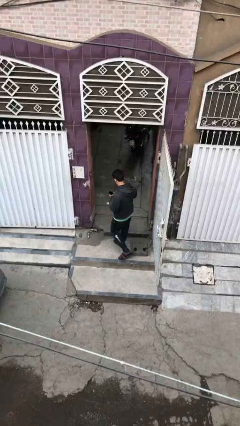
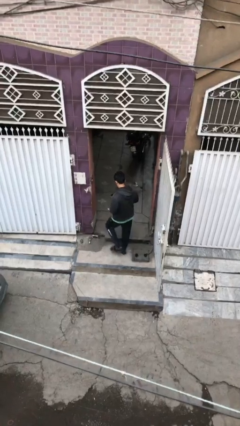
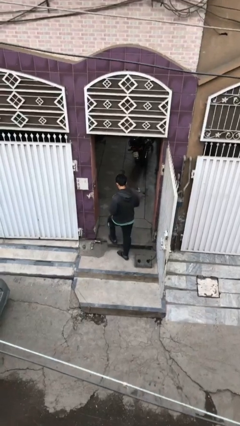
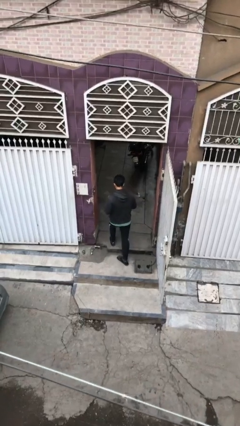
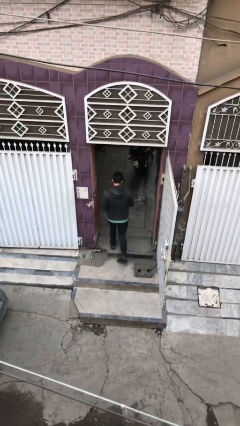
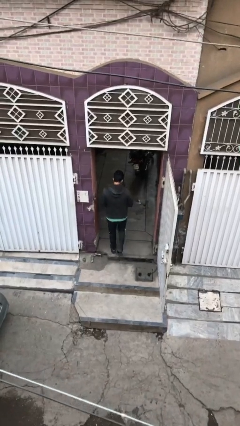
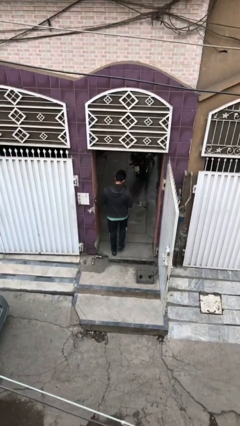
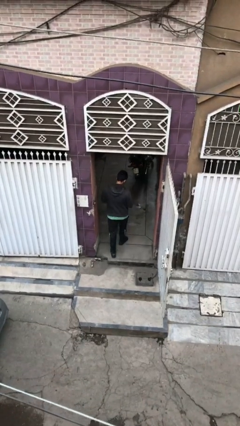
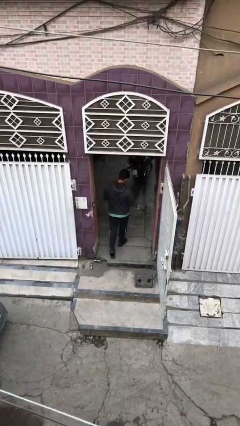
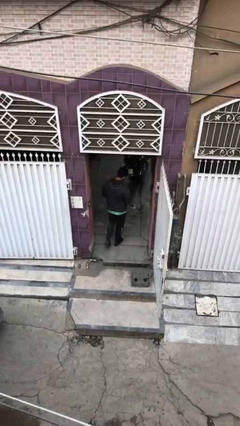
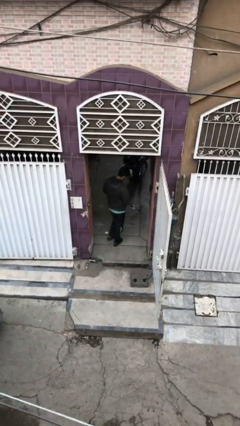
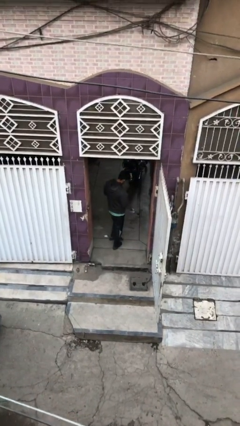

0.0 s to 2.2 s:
person exits scene through structure

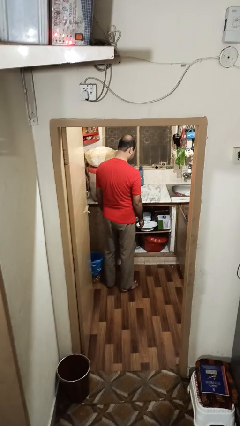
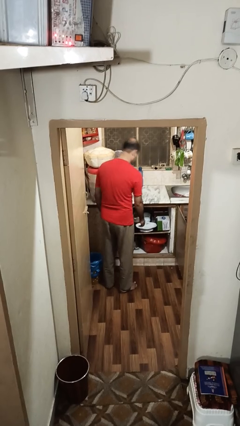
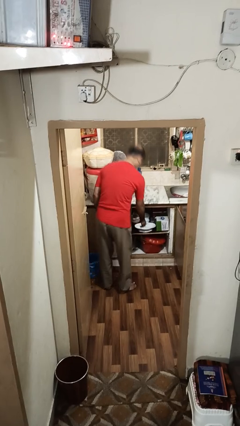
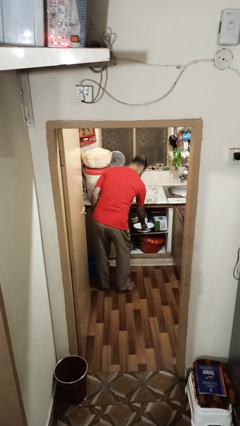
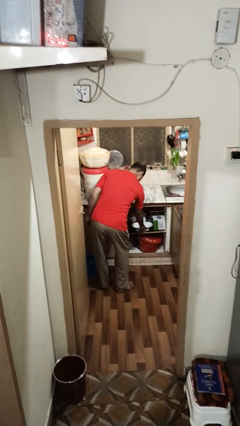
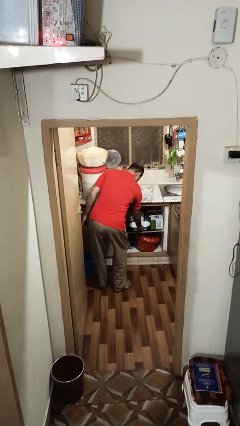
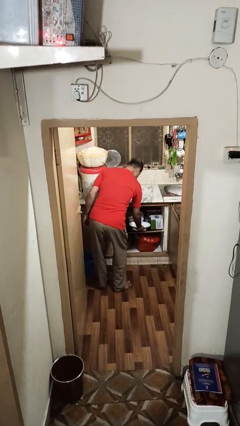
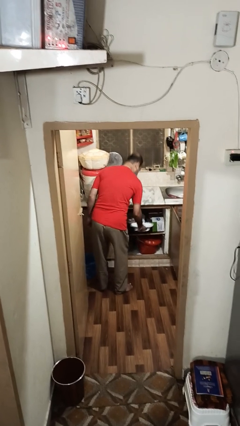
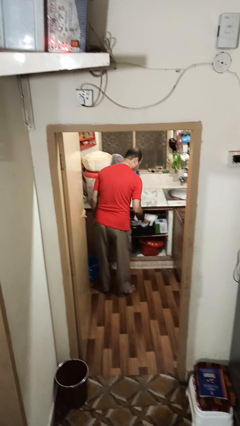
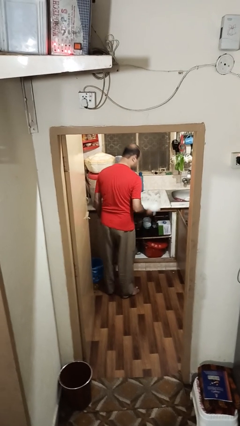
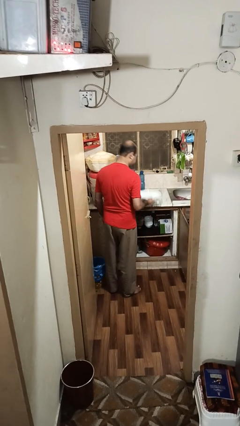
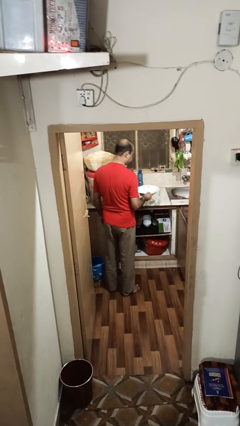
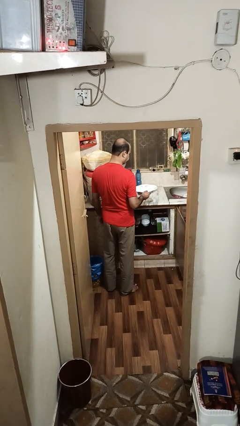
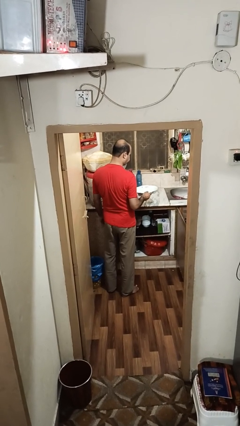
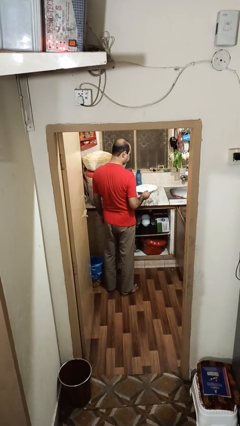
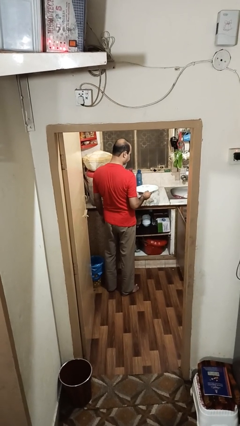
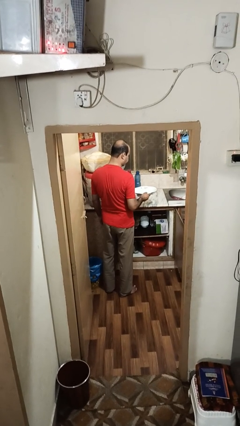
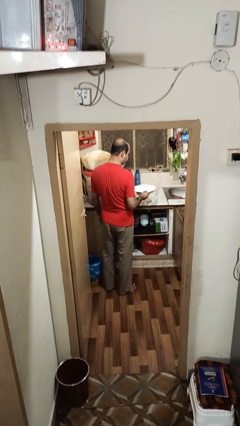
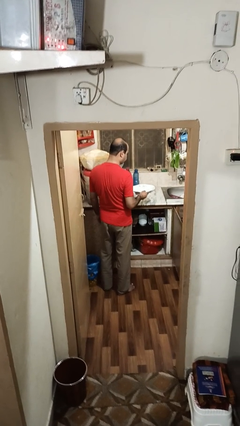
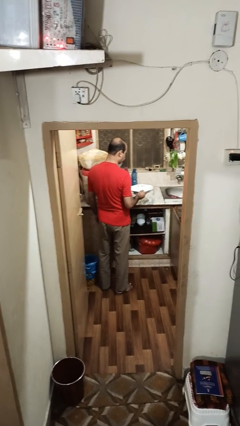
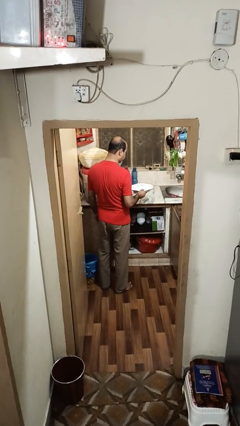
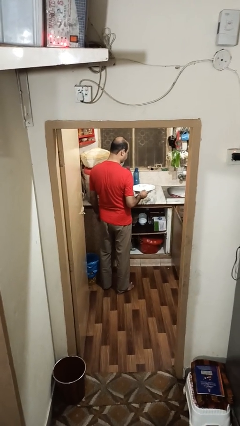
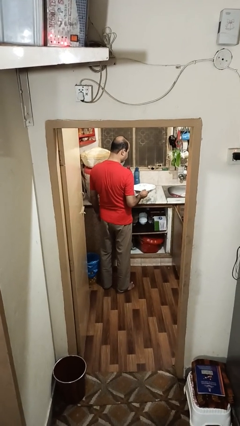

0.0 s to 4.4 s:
person picks up object from cabinet

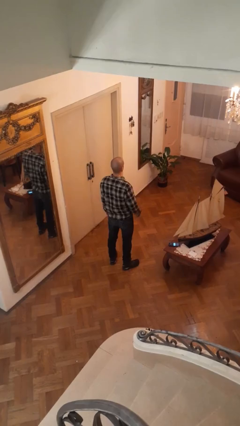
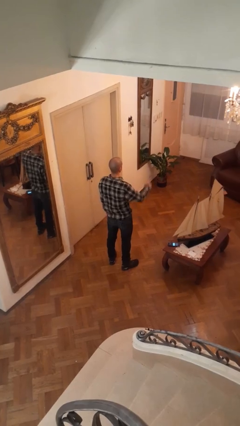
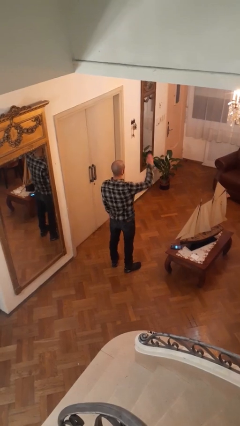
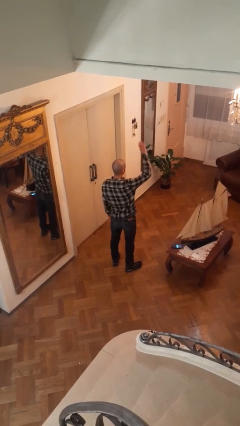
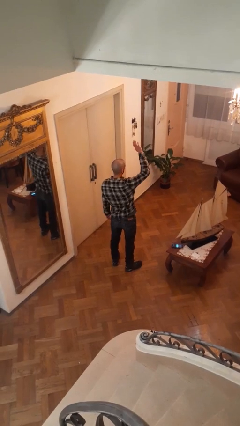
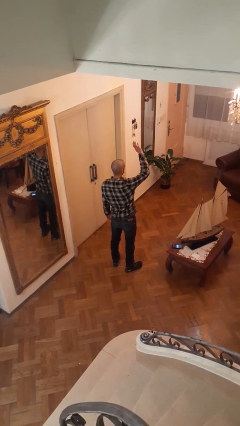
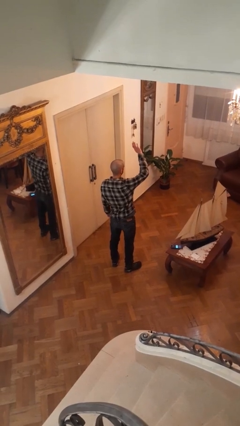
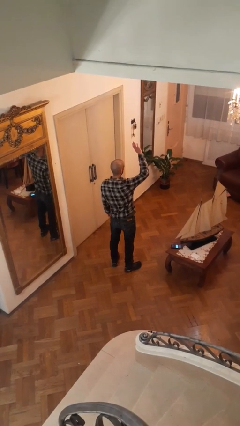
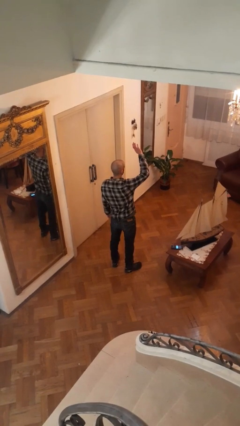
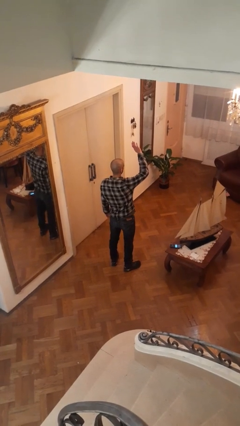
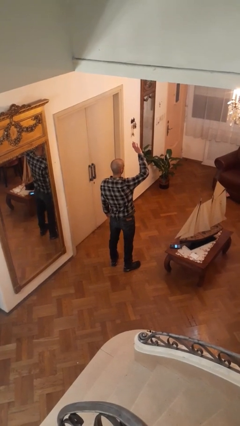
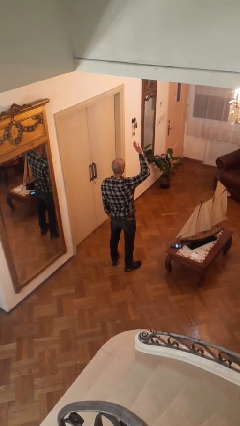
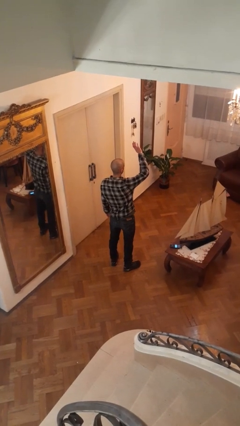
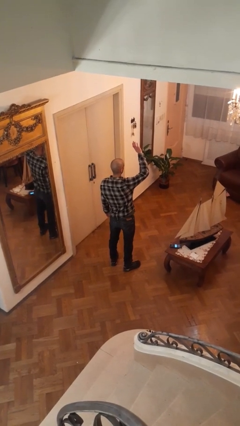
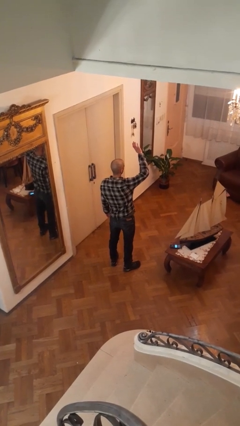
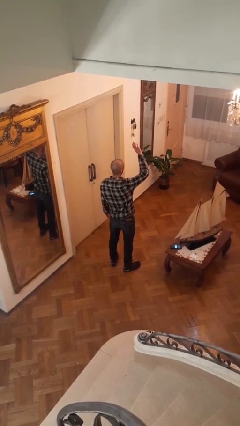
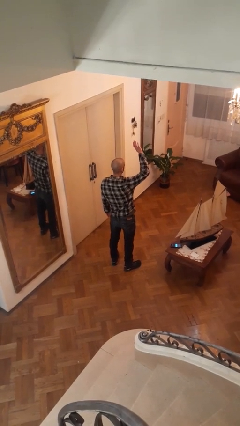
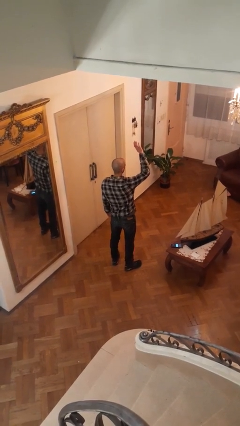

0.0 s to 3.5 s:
person gestures raise hand

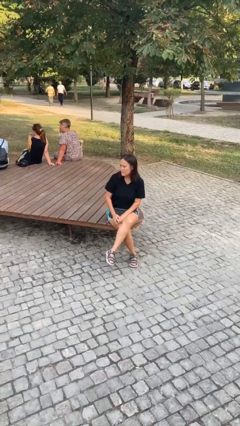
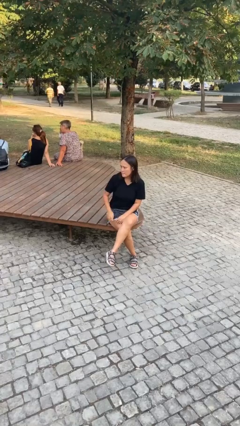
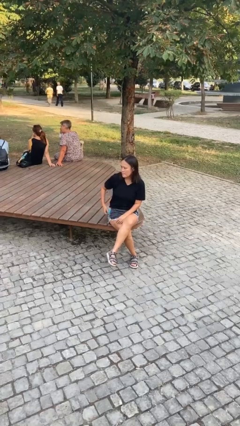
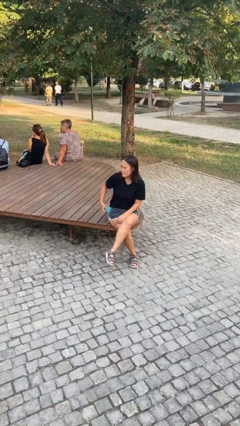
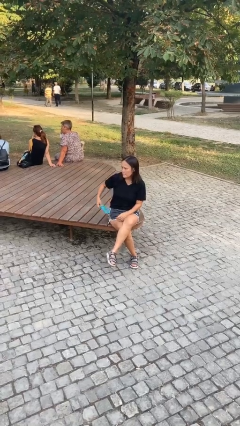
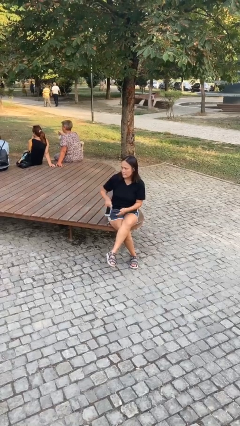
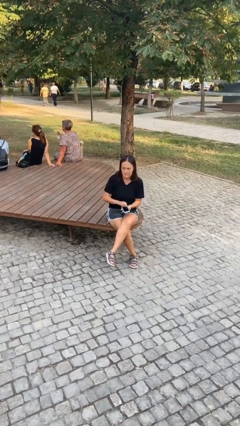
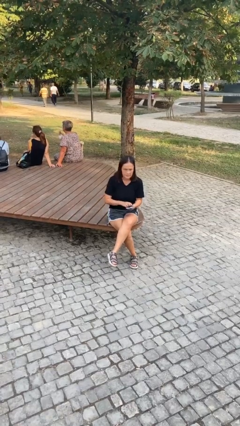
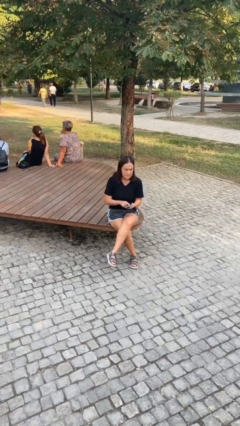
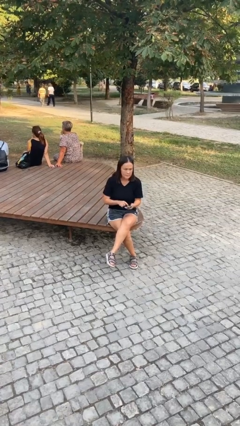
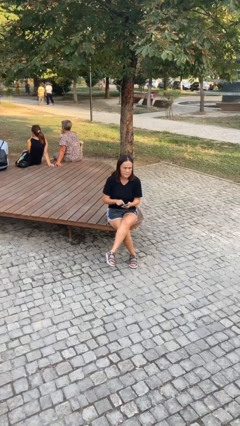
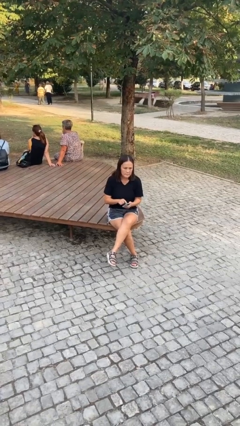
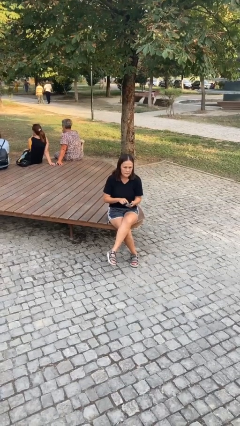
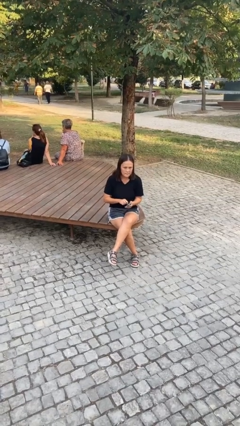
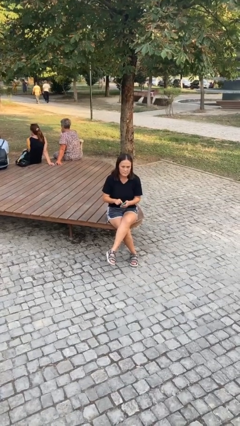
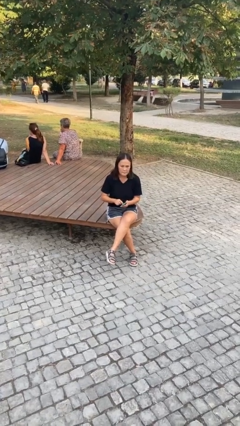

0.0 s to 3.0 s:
person takes phone from pocket

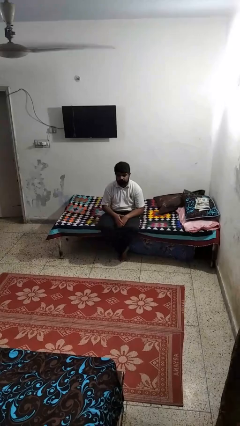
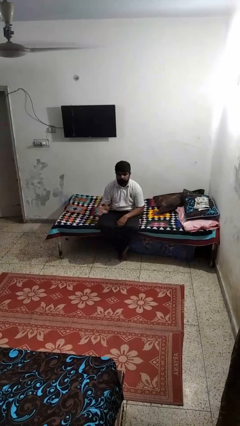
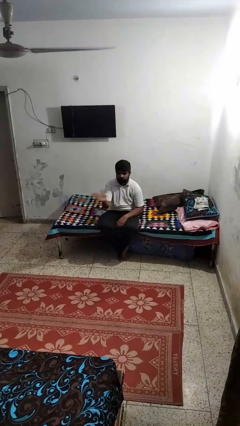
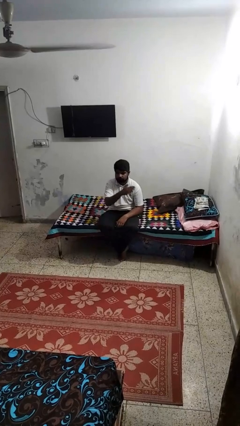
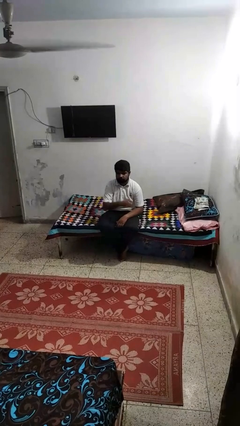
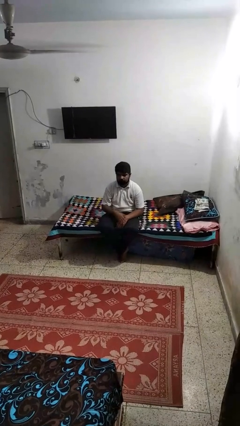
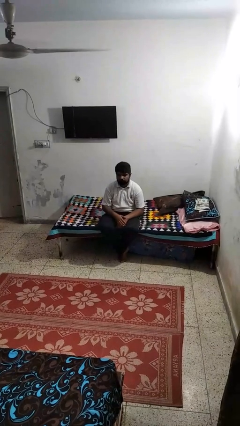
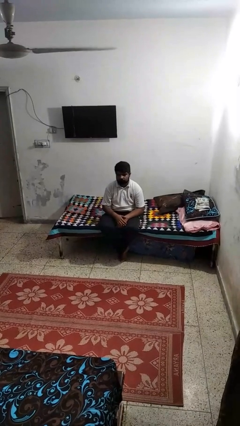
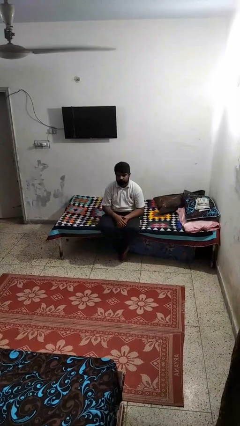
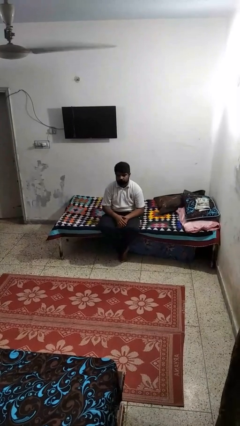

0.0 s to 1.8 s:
person gestures swipe left

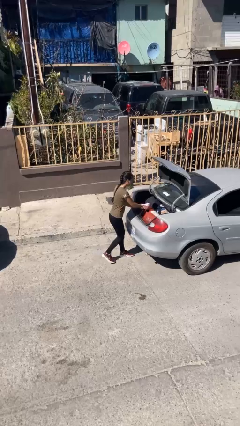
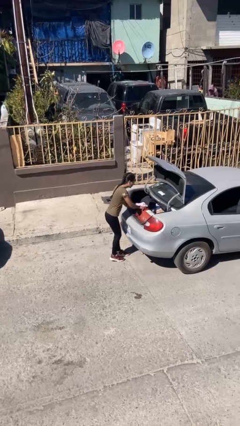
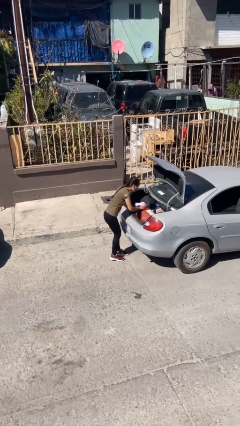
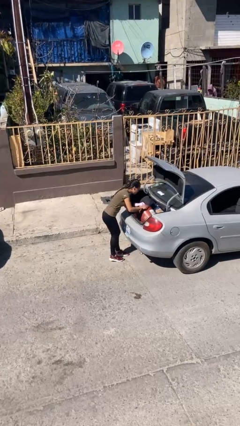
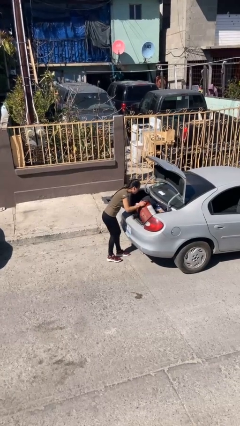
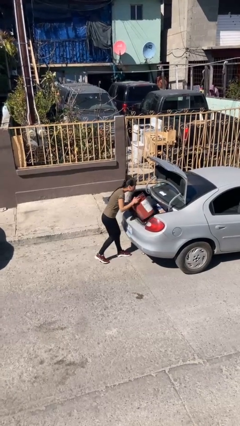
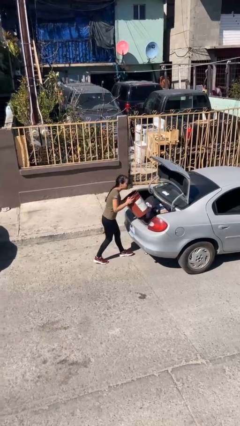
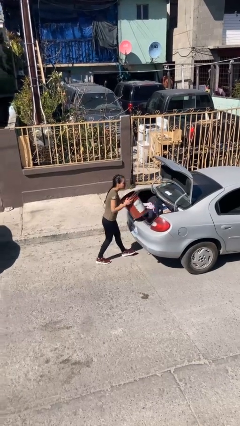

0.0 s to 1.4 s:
person unloads car

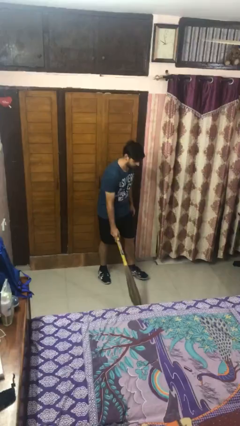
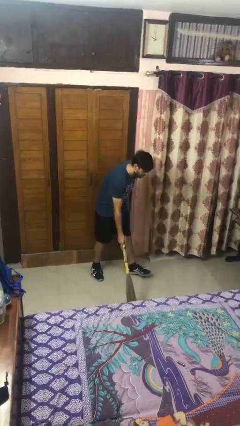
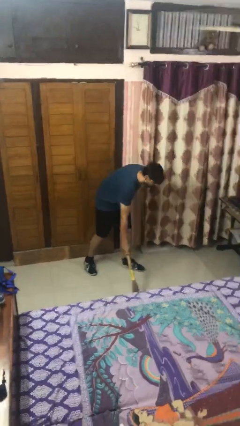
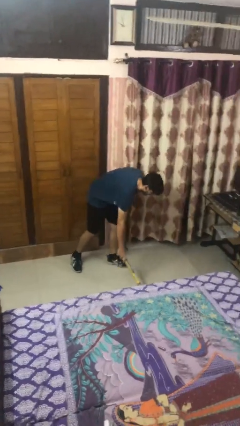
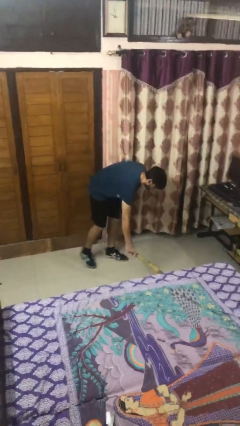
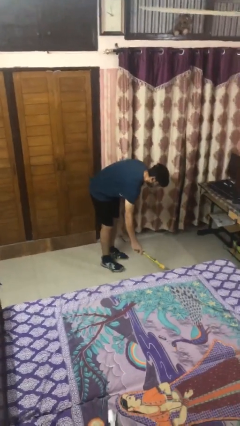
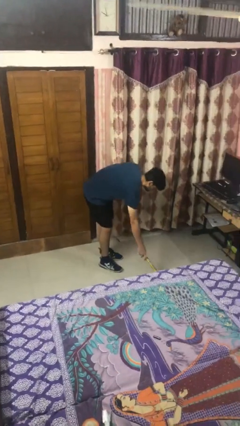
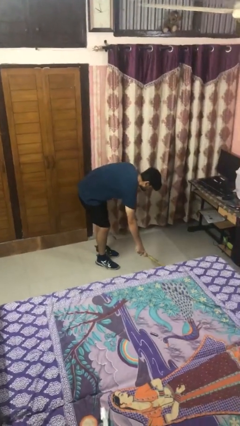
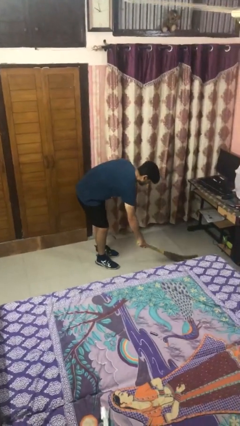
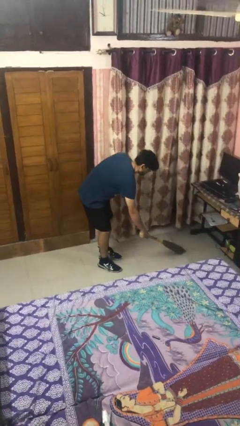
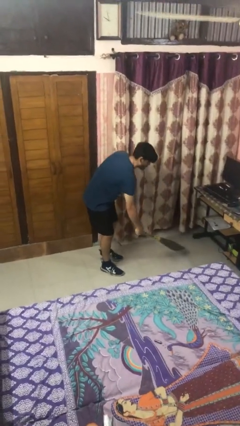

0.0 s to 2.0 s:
person sweeps floor
